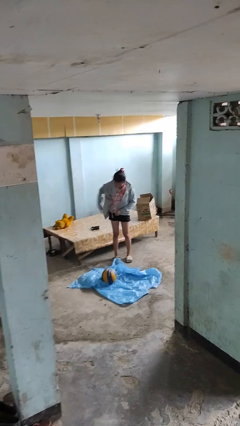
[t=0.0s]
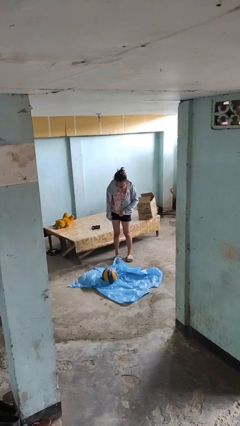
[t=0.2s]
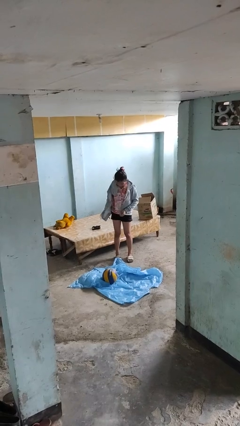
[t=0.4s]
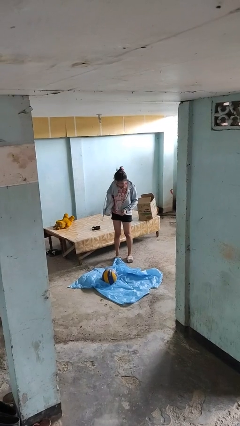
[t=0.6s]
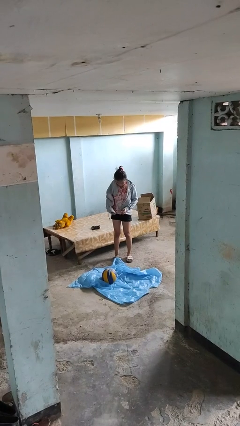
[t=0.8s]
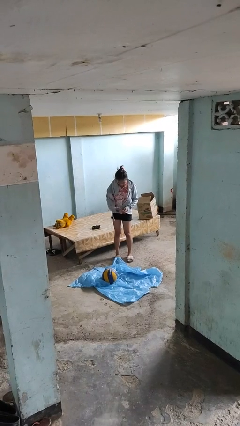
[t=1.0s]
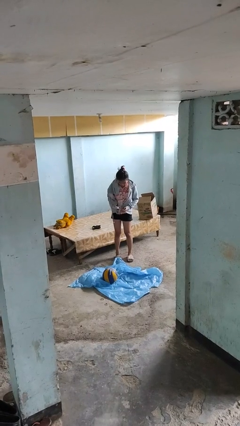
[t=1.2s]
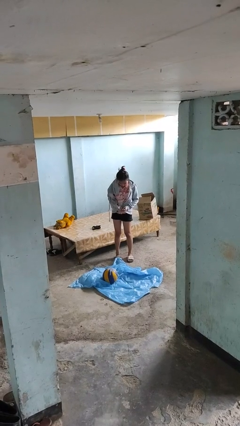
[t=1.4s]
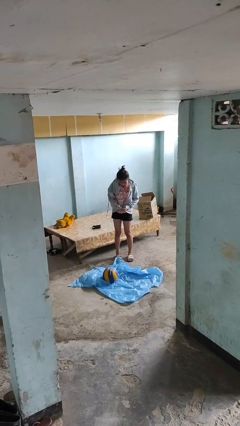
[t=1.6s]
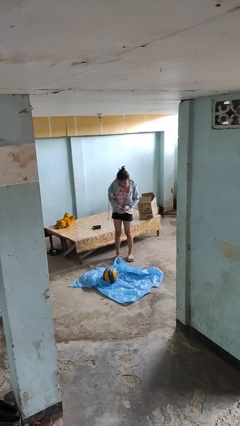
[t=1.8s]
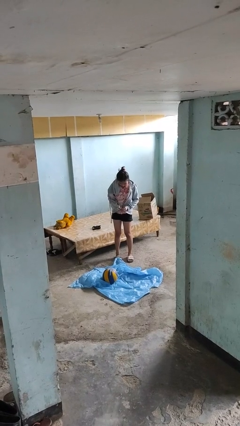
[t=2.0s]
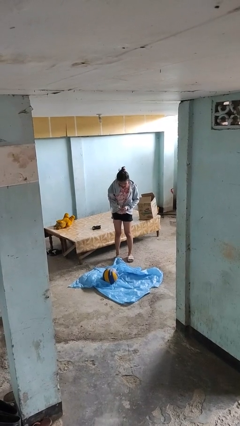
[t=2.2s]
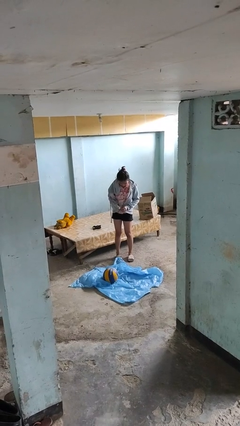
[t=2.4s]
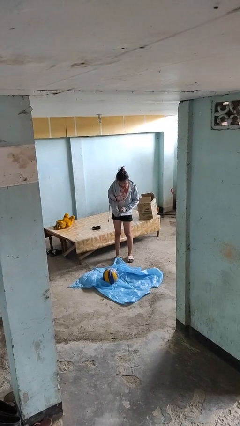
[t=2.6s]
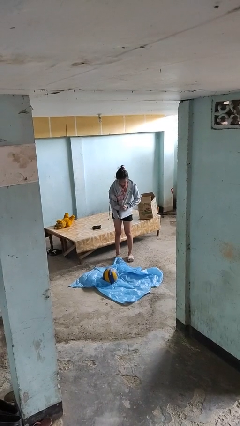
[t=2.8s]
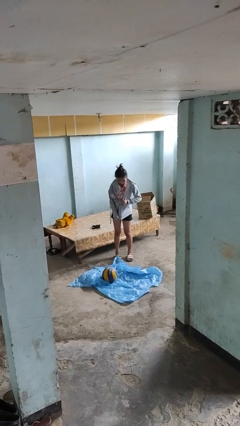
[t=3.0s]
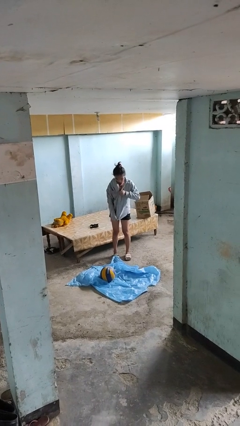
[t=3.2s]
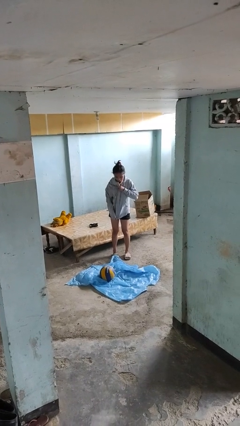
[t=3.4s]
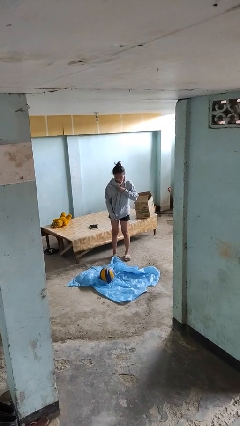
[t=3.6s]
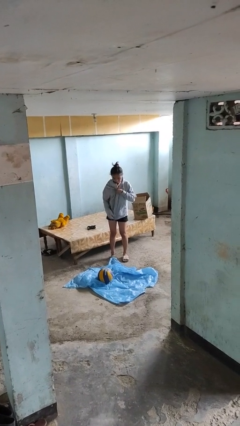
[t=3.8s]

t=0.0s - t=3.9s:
person zips up jacket

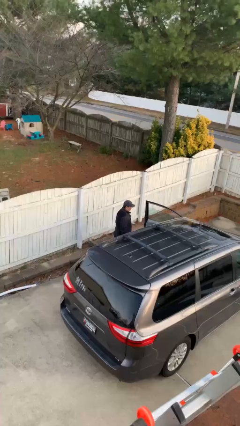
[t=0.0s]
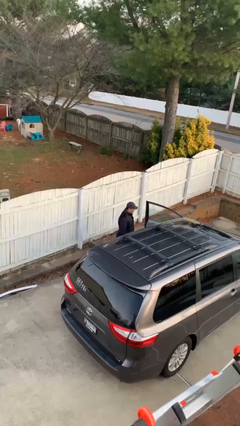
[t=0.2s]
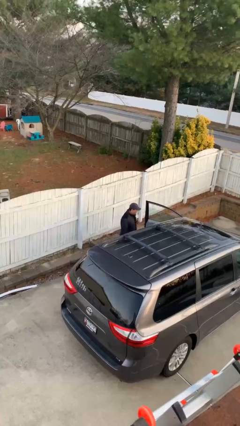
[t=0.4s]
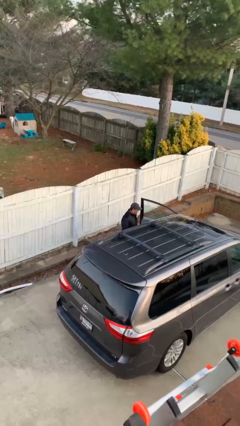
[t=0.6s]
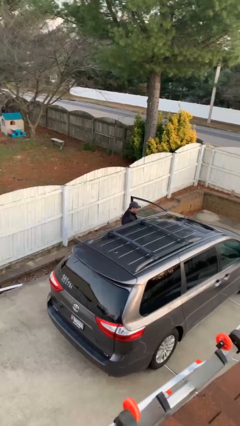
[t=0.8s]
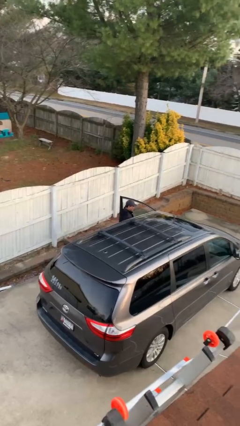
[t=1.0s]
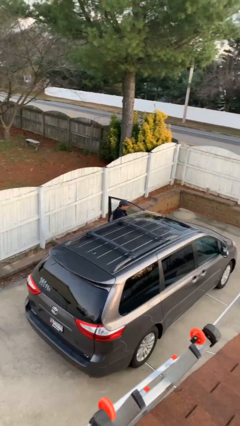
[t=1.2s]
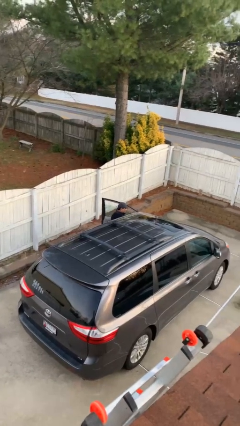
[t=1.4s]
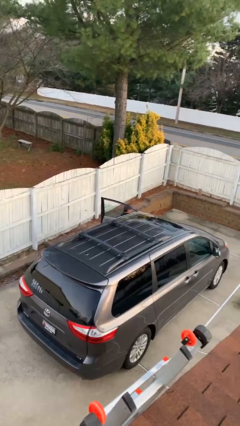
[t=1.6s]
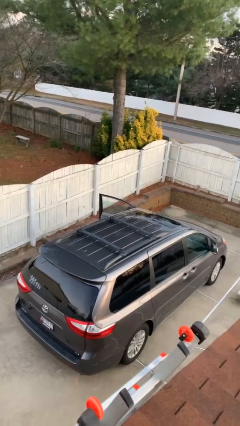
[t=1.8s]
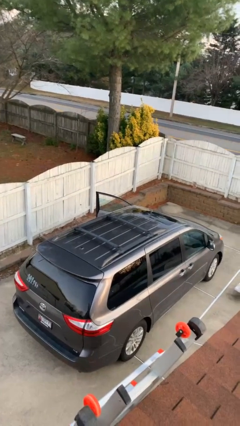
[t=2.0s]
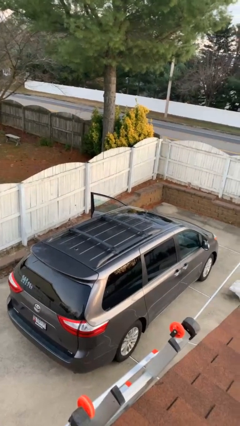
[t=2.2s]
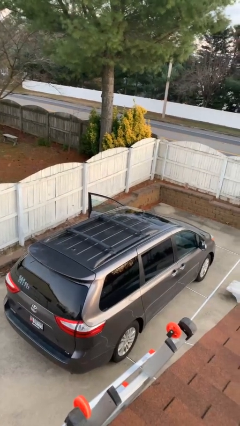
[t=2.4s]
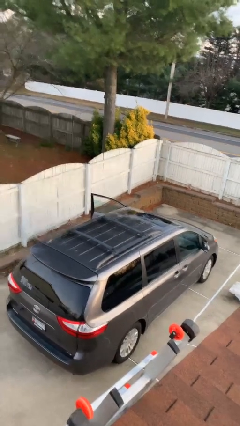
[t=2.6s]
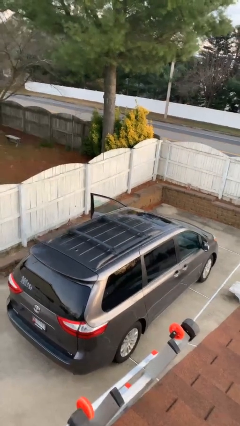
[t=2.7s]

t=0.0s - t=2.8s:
person enters car

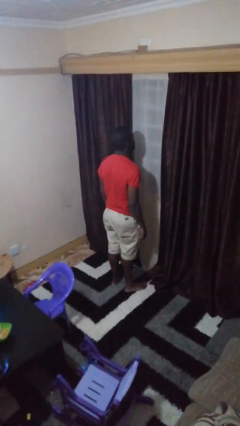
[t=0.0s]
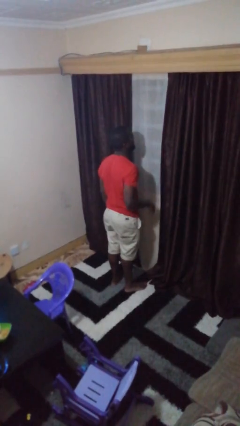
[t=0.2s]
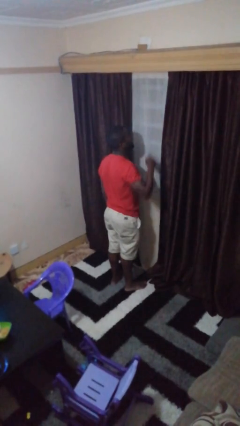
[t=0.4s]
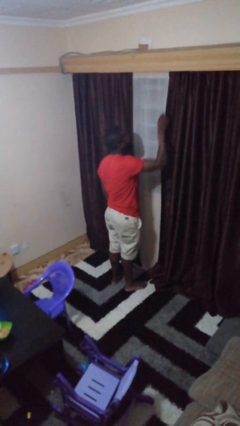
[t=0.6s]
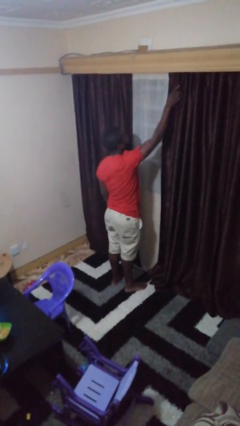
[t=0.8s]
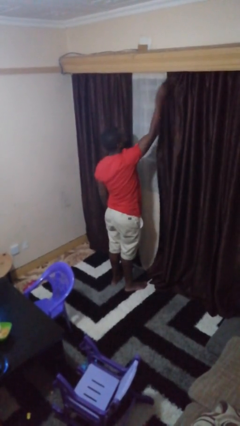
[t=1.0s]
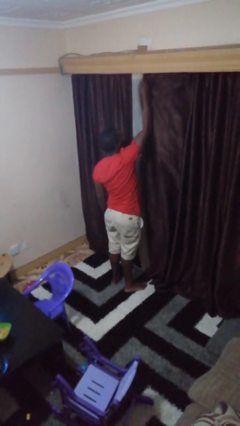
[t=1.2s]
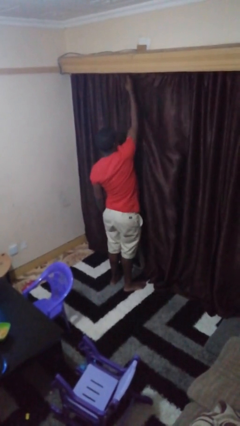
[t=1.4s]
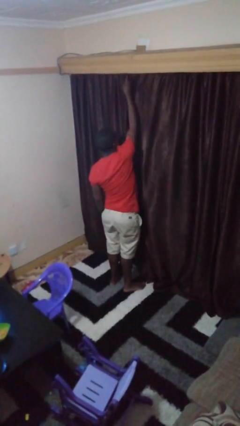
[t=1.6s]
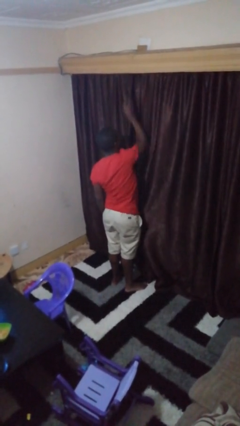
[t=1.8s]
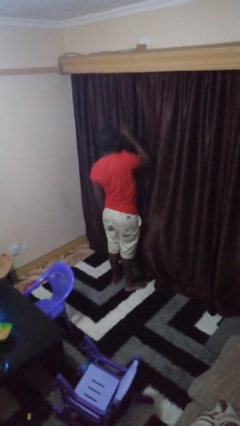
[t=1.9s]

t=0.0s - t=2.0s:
person closes curtains

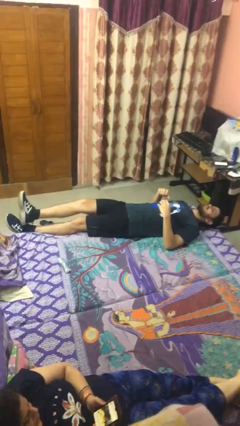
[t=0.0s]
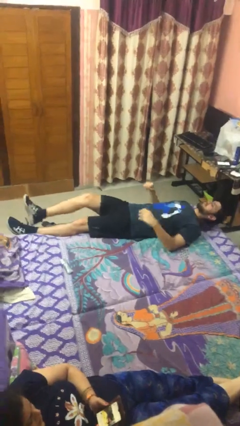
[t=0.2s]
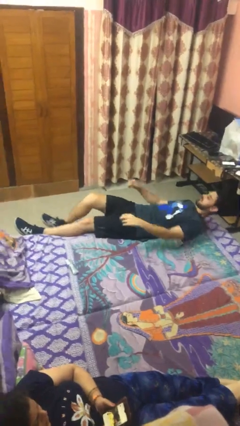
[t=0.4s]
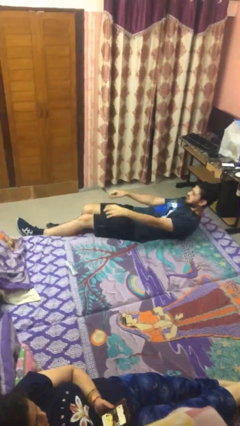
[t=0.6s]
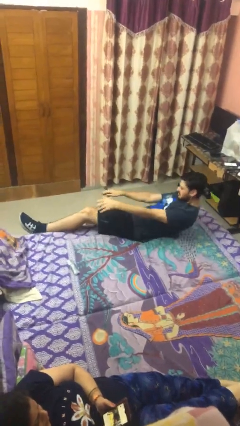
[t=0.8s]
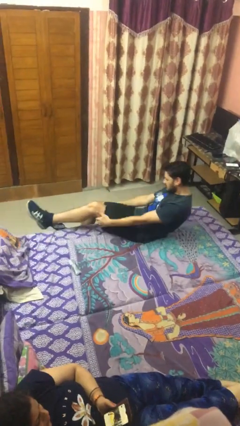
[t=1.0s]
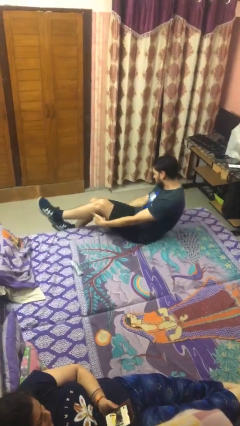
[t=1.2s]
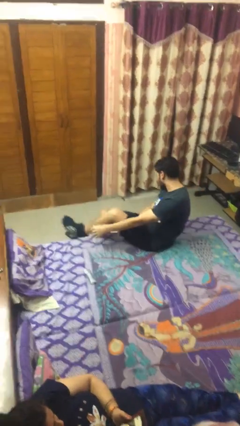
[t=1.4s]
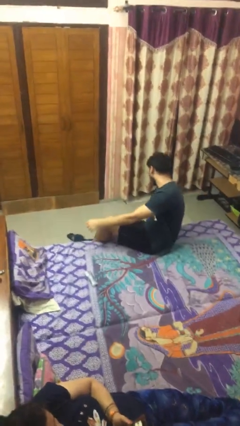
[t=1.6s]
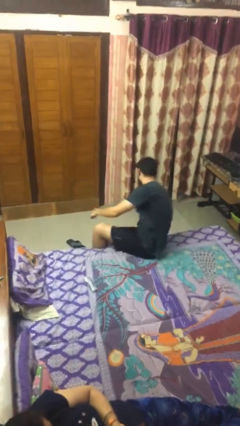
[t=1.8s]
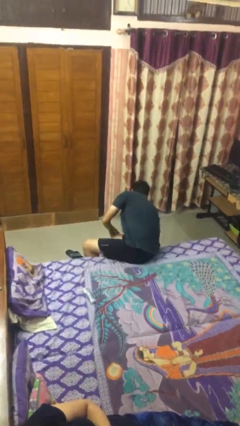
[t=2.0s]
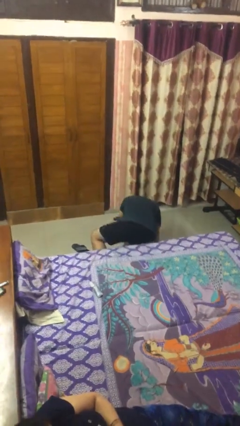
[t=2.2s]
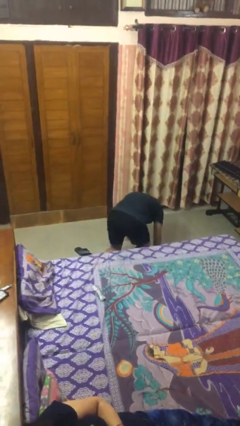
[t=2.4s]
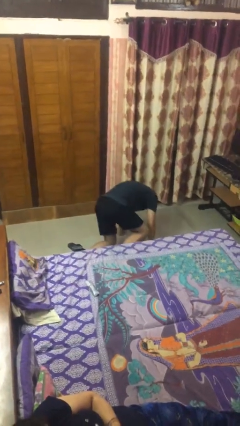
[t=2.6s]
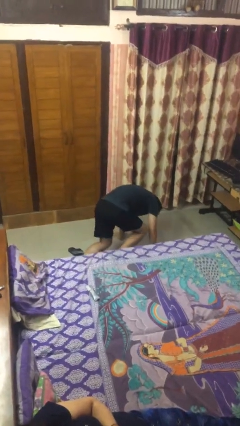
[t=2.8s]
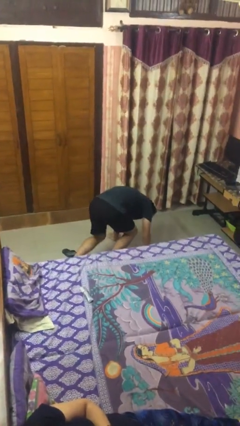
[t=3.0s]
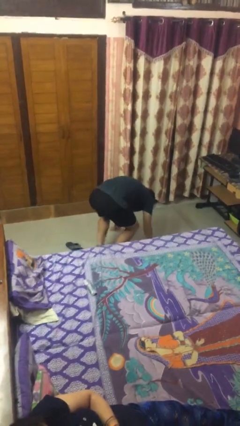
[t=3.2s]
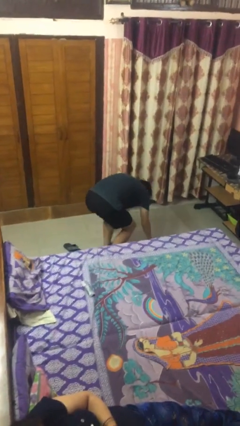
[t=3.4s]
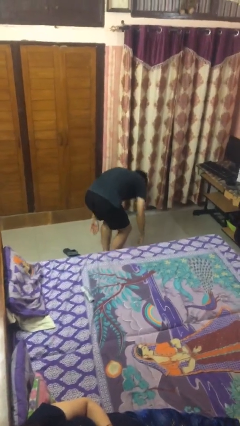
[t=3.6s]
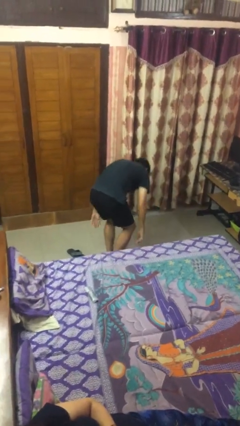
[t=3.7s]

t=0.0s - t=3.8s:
person falls from bed

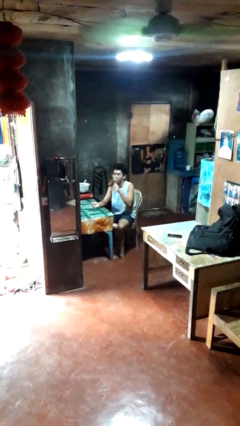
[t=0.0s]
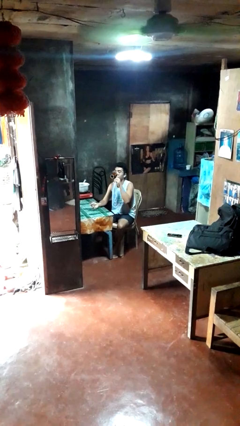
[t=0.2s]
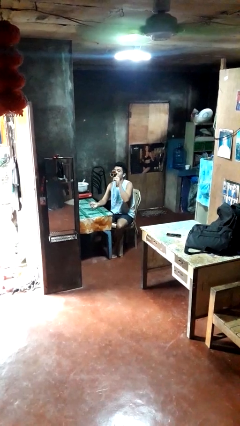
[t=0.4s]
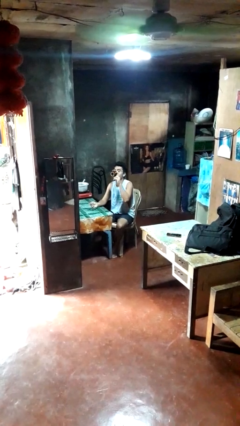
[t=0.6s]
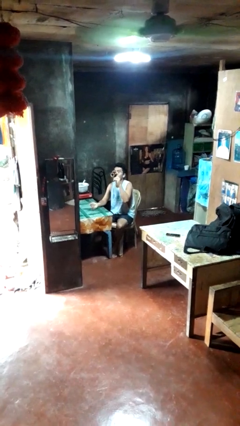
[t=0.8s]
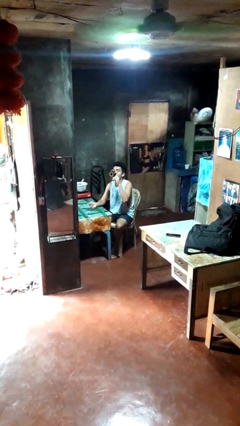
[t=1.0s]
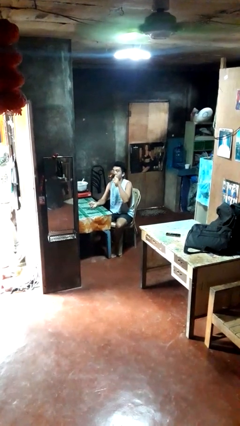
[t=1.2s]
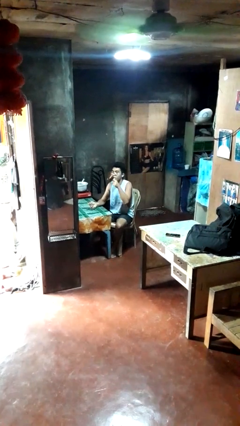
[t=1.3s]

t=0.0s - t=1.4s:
person drinks from mug

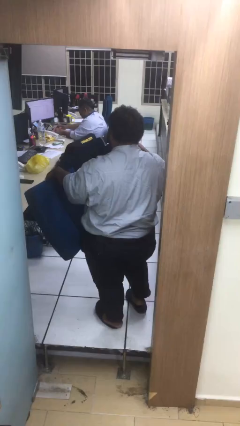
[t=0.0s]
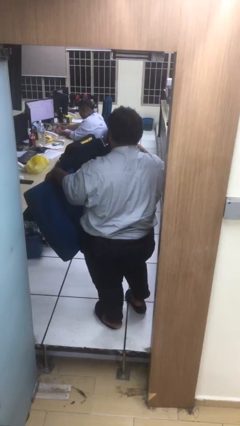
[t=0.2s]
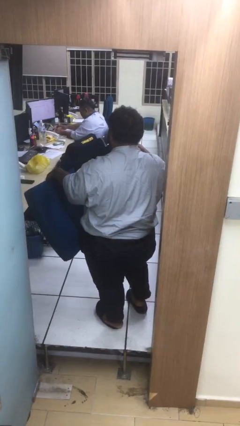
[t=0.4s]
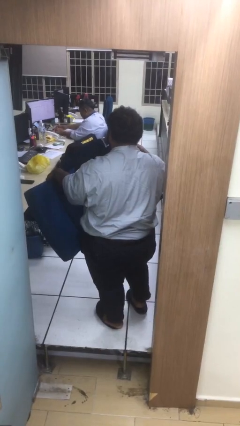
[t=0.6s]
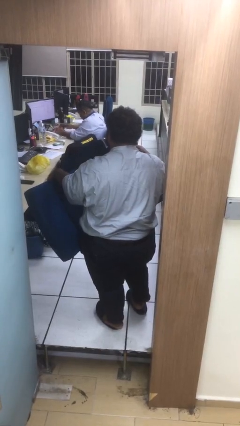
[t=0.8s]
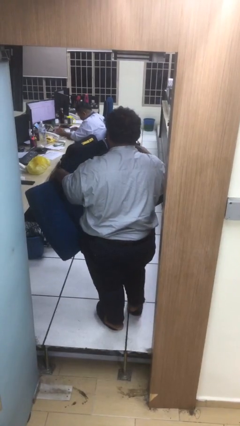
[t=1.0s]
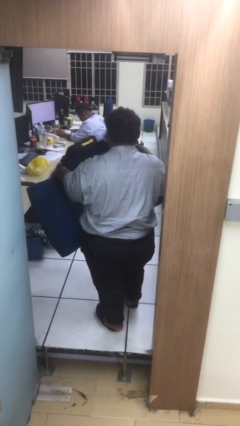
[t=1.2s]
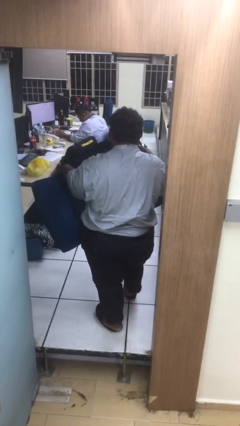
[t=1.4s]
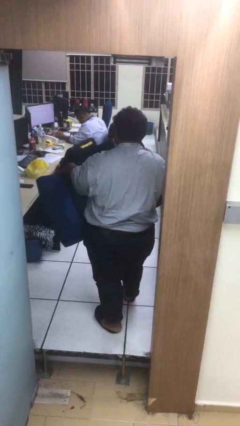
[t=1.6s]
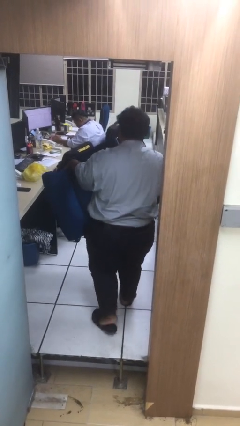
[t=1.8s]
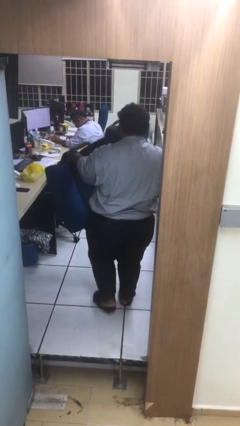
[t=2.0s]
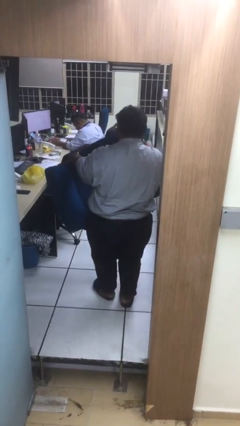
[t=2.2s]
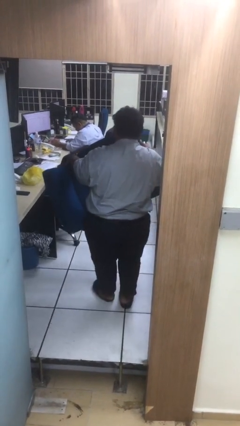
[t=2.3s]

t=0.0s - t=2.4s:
person carries furniture

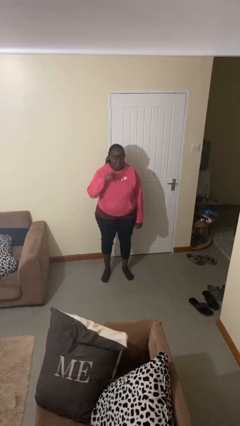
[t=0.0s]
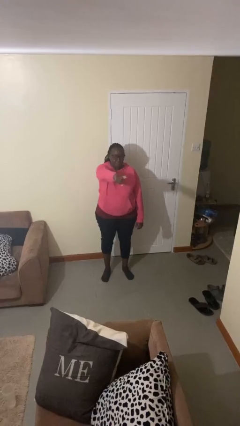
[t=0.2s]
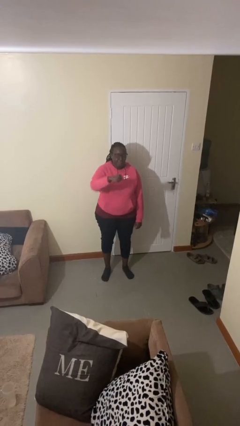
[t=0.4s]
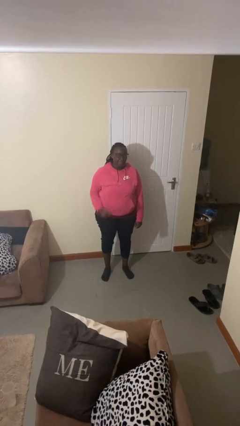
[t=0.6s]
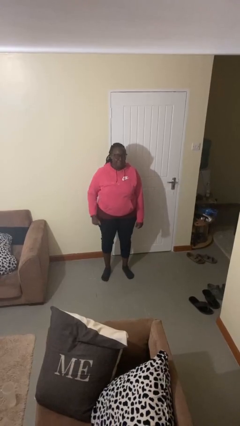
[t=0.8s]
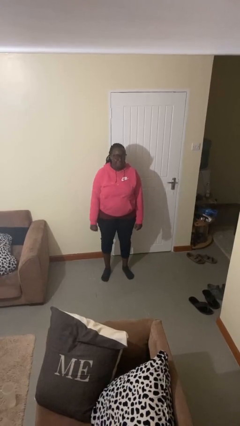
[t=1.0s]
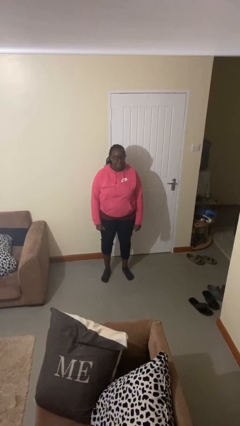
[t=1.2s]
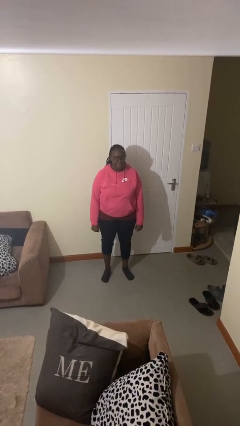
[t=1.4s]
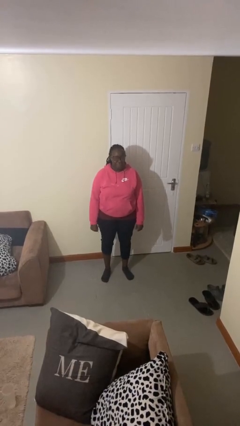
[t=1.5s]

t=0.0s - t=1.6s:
person punches
